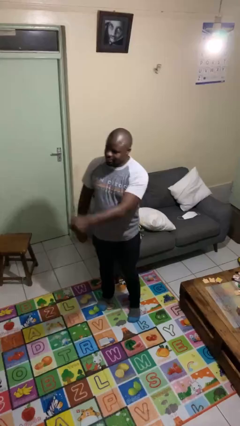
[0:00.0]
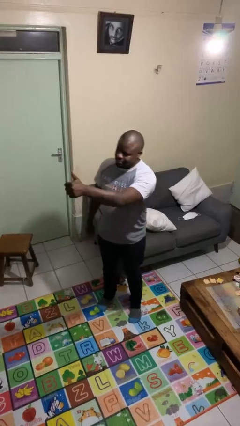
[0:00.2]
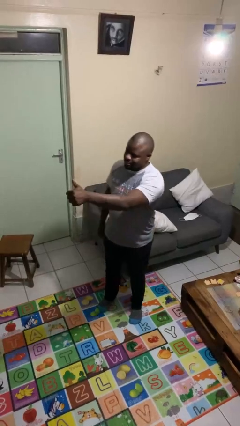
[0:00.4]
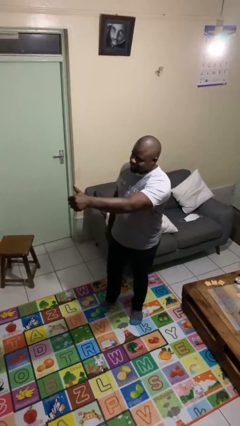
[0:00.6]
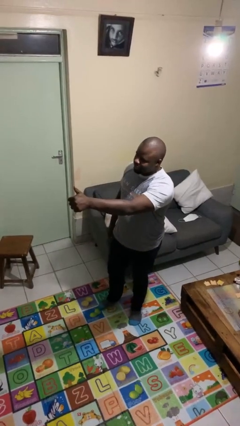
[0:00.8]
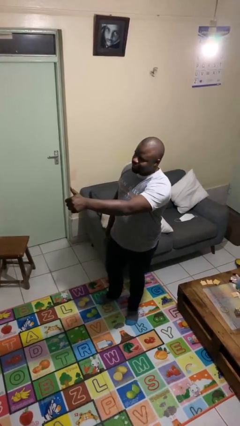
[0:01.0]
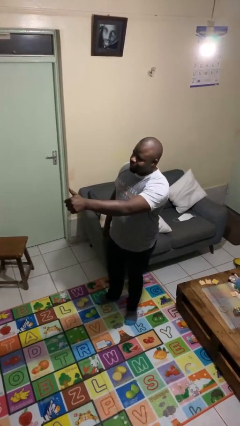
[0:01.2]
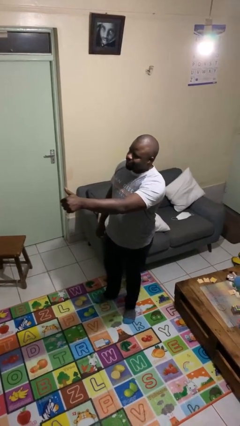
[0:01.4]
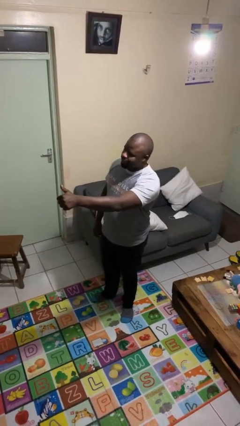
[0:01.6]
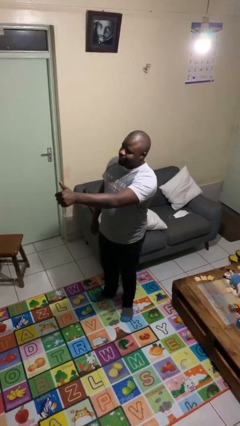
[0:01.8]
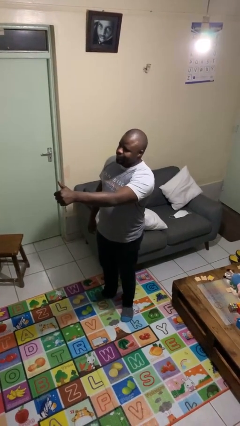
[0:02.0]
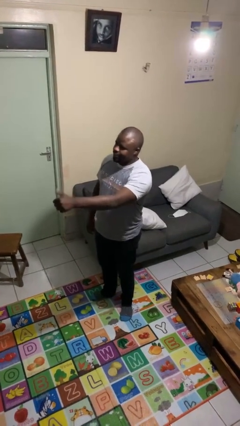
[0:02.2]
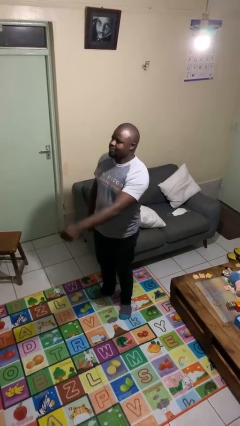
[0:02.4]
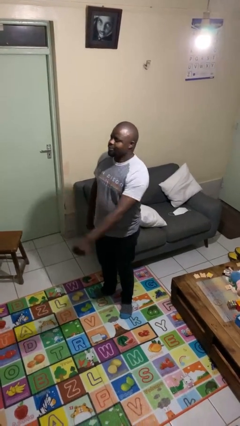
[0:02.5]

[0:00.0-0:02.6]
person gestures thumbs up

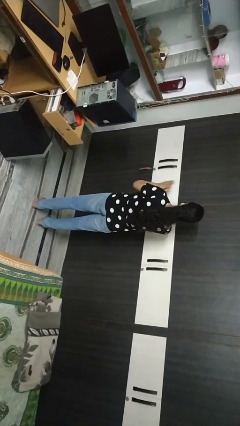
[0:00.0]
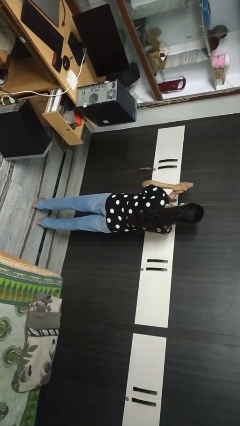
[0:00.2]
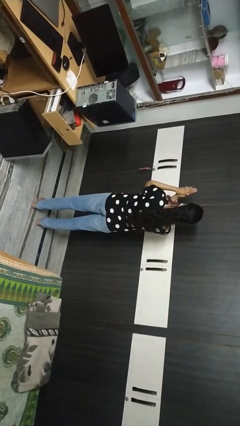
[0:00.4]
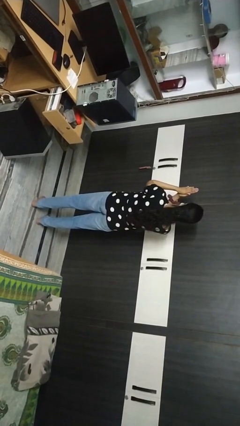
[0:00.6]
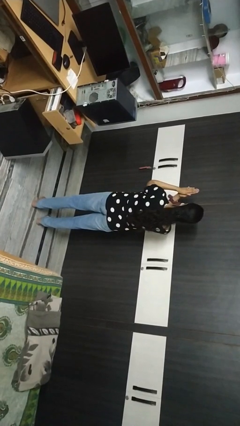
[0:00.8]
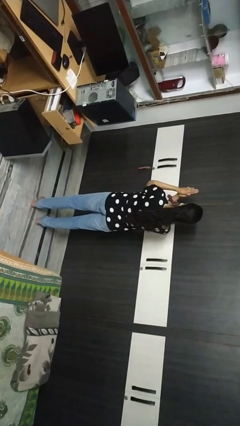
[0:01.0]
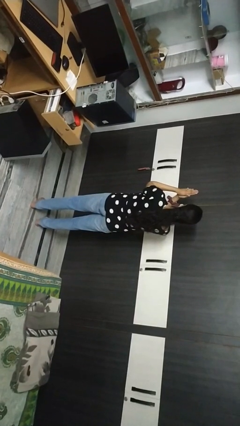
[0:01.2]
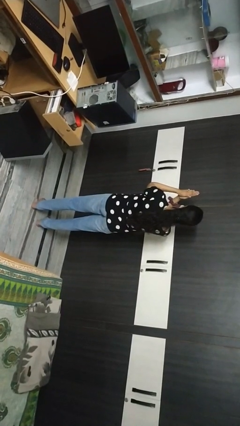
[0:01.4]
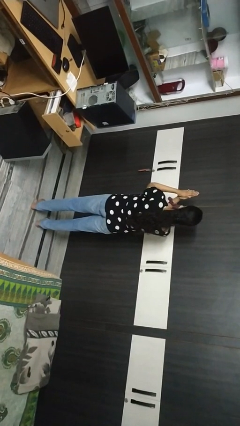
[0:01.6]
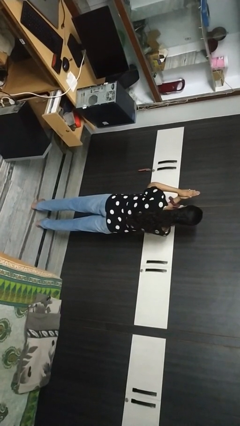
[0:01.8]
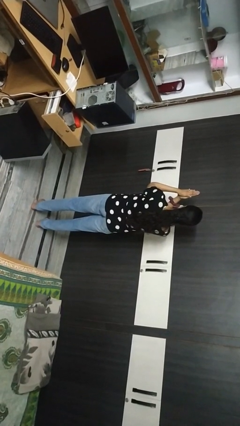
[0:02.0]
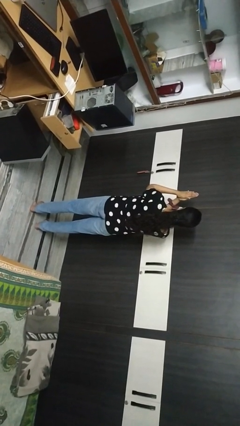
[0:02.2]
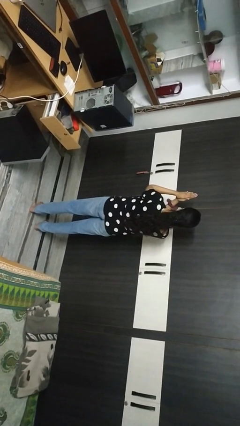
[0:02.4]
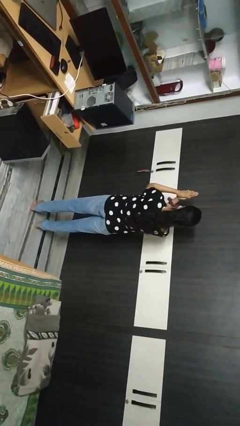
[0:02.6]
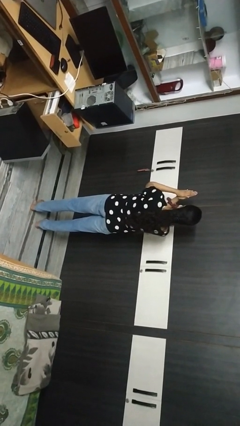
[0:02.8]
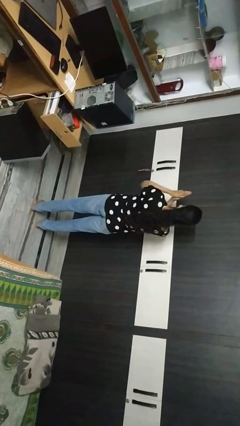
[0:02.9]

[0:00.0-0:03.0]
person prays

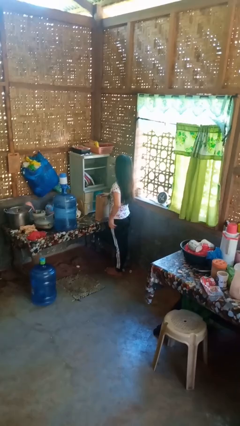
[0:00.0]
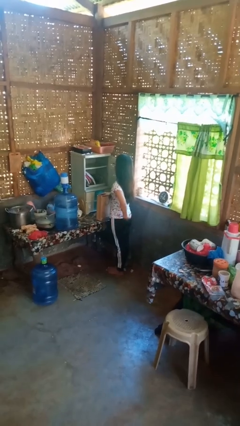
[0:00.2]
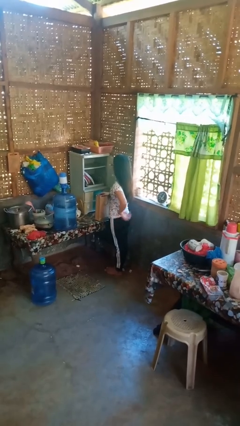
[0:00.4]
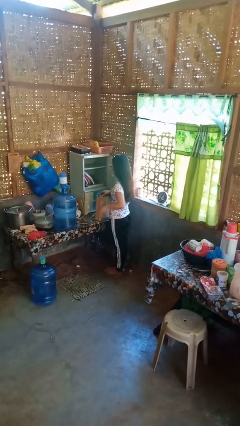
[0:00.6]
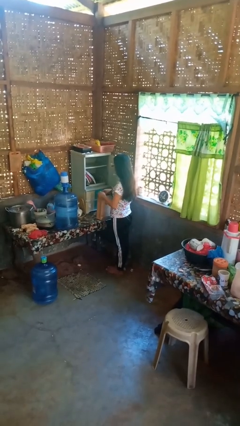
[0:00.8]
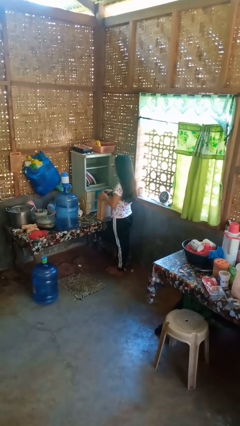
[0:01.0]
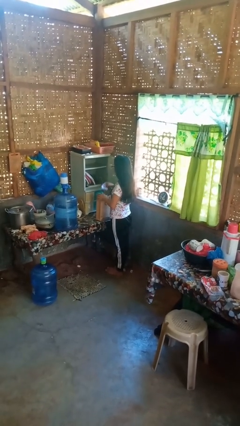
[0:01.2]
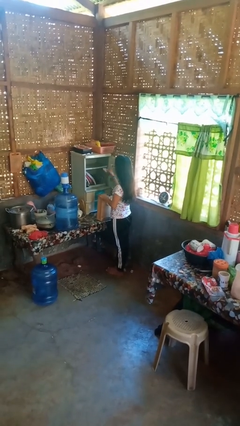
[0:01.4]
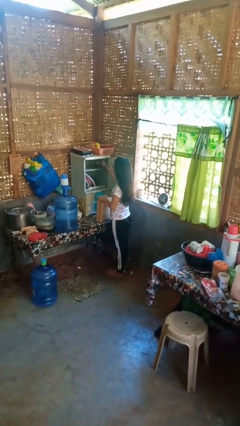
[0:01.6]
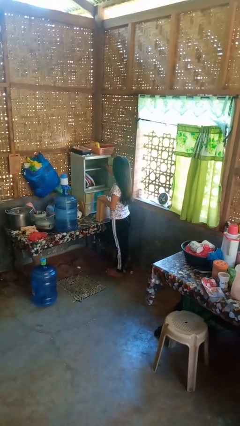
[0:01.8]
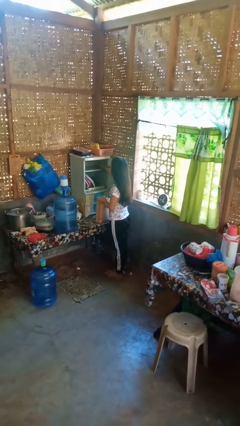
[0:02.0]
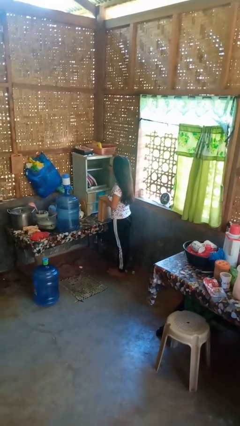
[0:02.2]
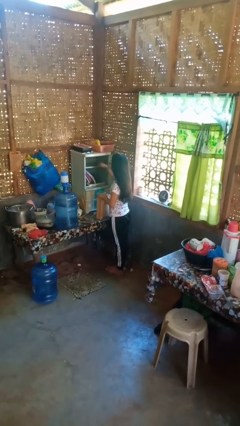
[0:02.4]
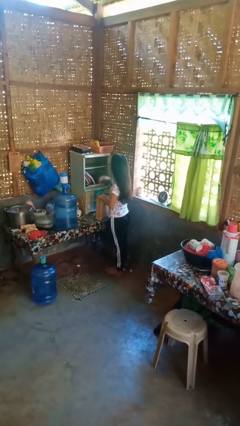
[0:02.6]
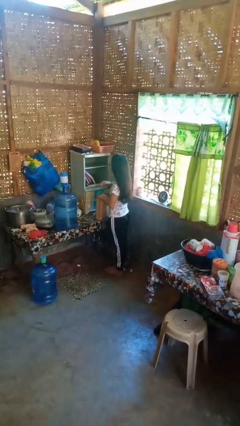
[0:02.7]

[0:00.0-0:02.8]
person loads groceries into cabinet

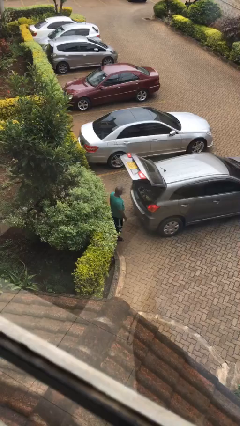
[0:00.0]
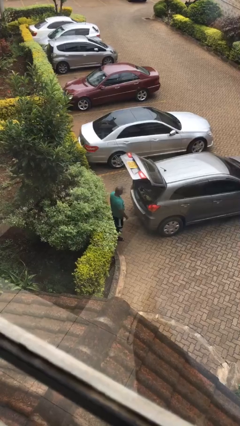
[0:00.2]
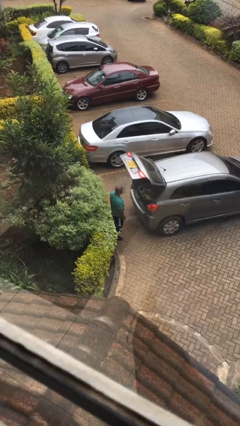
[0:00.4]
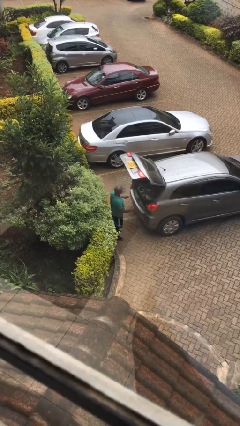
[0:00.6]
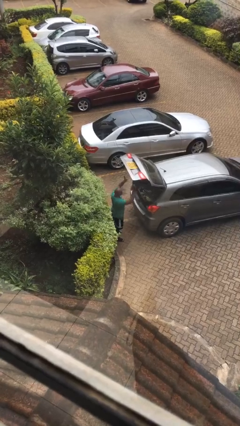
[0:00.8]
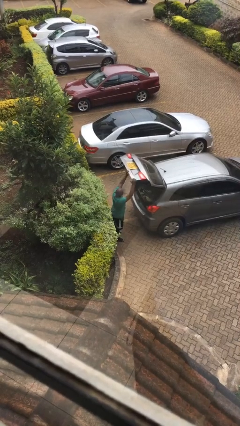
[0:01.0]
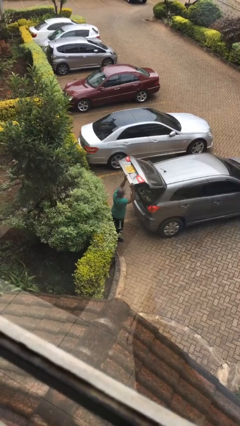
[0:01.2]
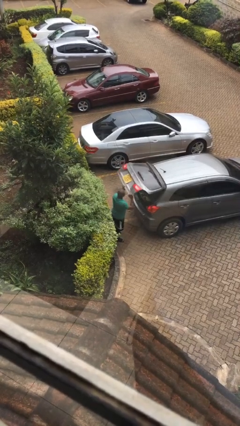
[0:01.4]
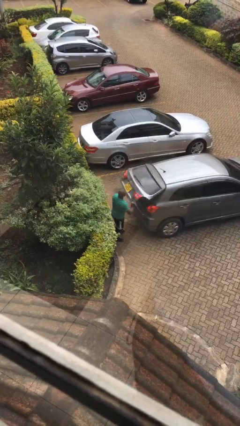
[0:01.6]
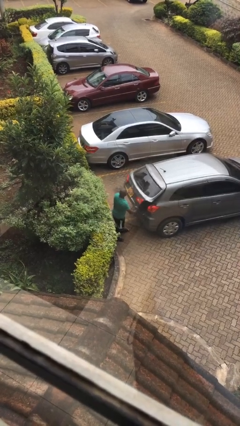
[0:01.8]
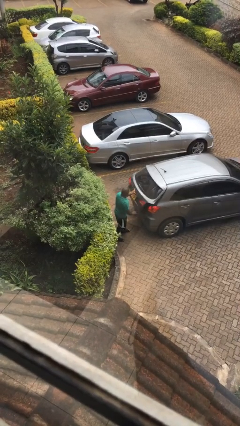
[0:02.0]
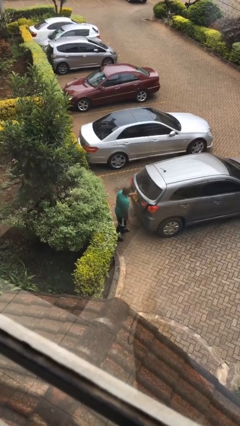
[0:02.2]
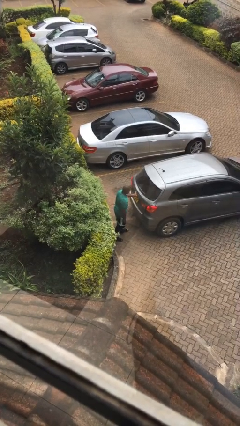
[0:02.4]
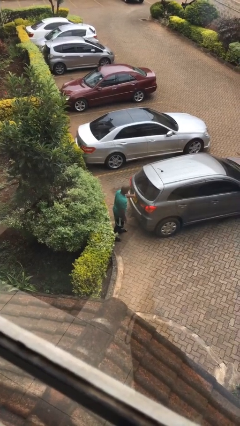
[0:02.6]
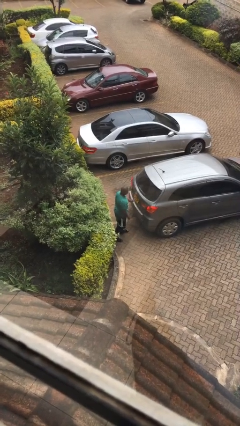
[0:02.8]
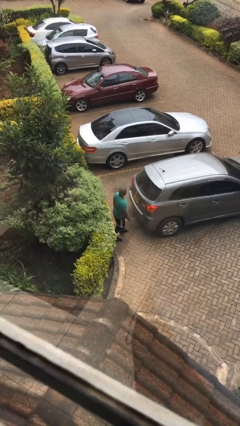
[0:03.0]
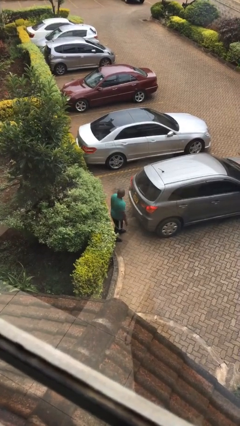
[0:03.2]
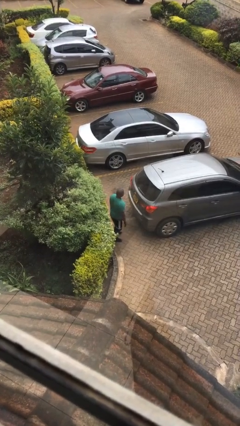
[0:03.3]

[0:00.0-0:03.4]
person closes car trunk

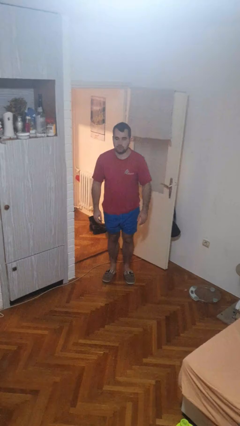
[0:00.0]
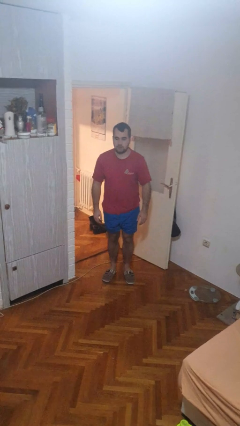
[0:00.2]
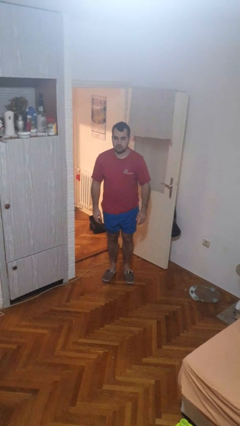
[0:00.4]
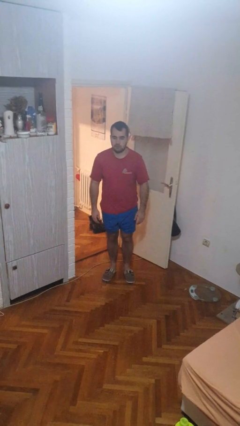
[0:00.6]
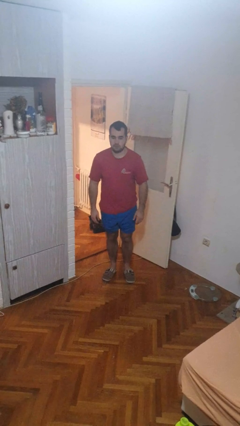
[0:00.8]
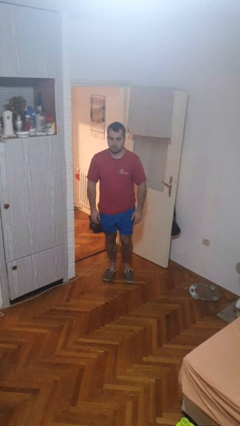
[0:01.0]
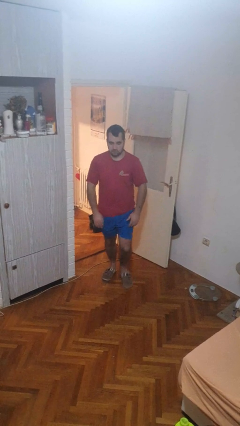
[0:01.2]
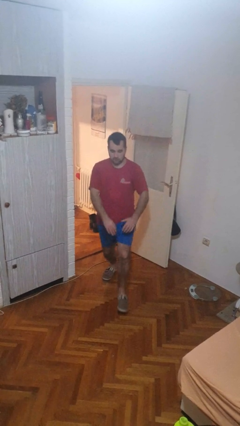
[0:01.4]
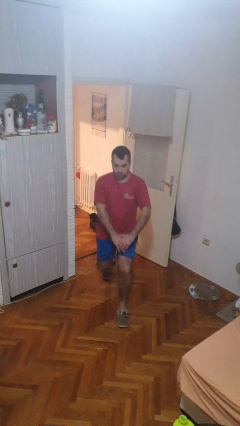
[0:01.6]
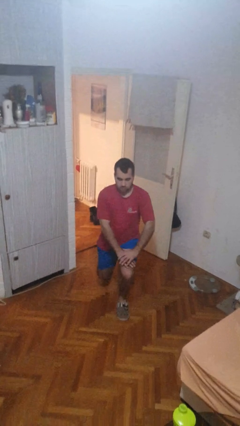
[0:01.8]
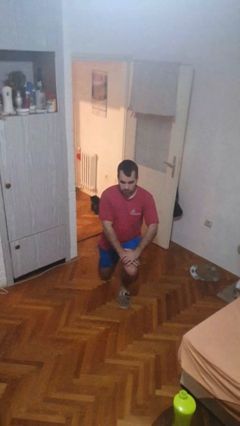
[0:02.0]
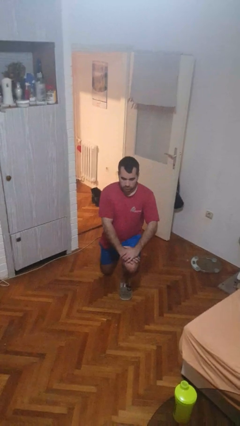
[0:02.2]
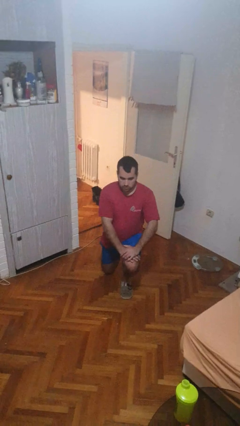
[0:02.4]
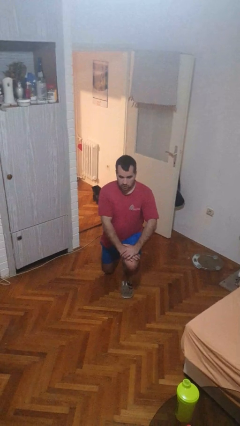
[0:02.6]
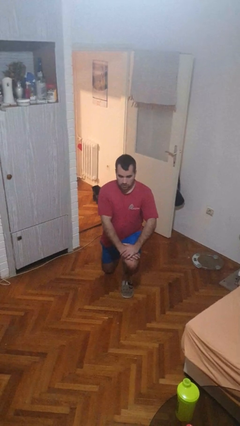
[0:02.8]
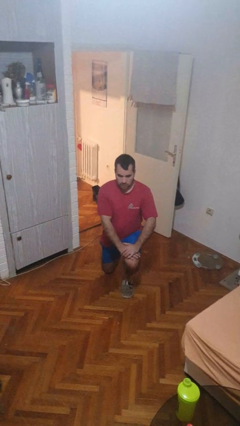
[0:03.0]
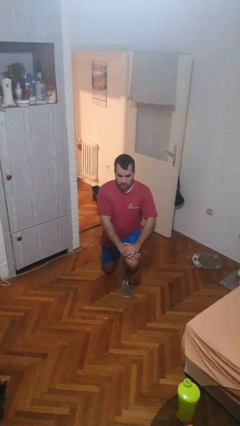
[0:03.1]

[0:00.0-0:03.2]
person kneels

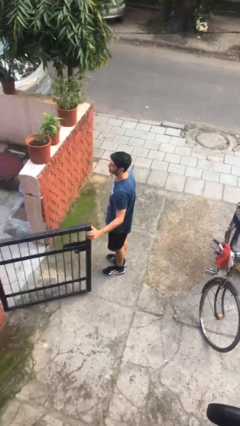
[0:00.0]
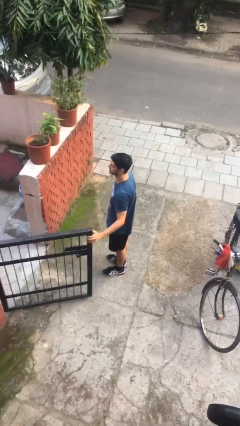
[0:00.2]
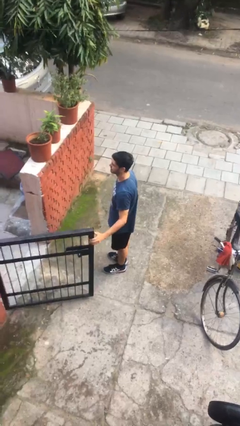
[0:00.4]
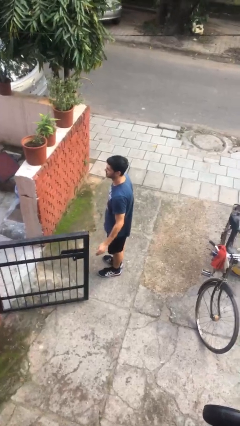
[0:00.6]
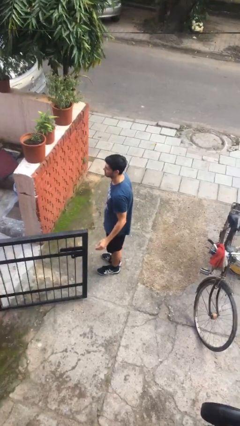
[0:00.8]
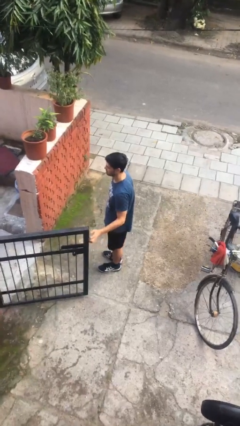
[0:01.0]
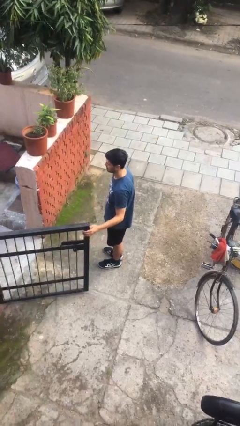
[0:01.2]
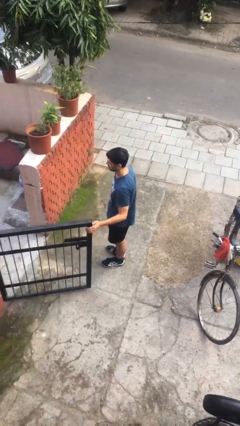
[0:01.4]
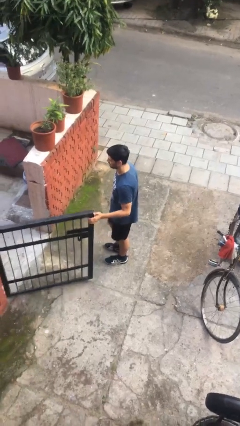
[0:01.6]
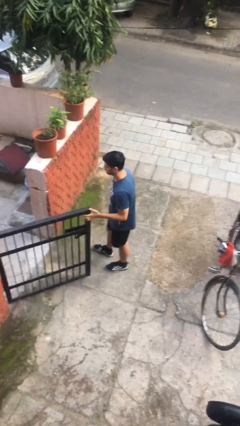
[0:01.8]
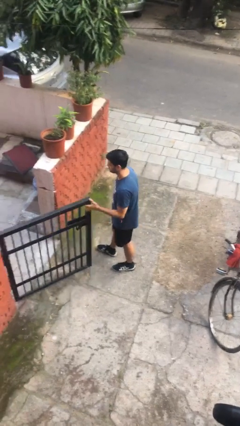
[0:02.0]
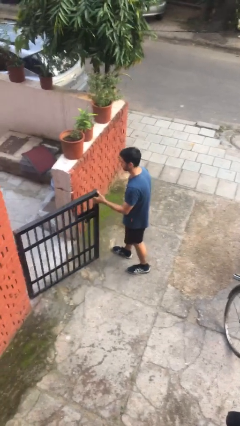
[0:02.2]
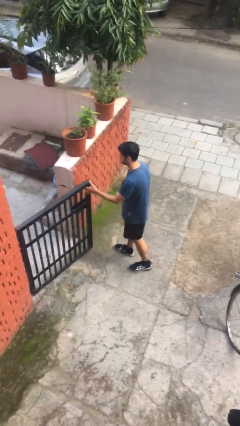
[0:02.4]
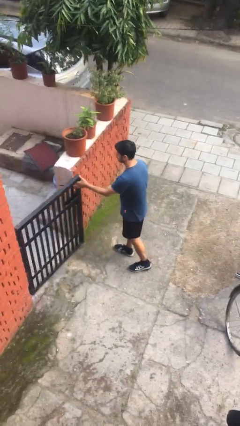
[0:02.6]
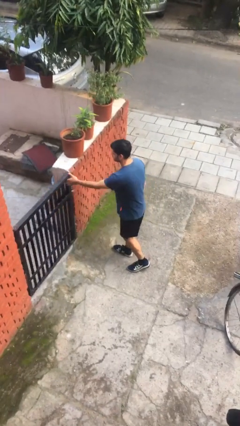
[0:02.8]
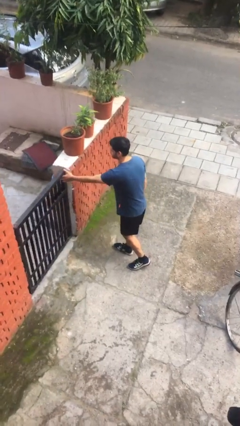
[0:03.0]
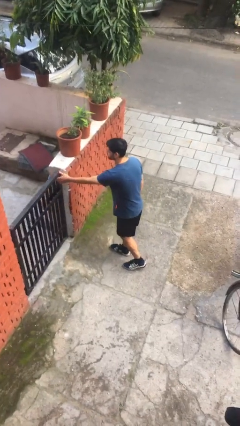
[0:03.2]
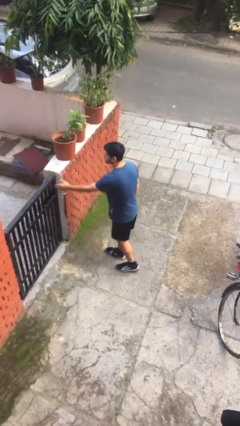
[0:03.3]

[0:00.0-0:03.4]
person closes gate
